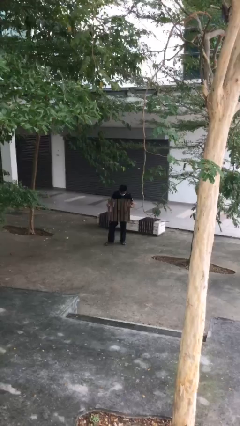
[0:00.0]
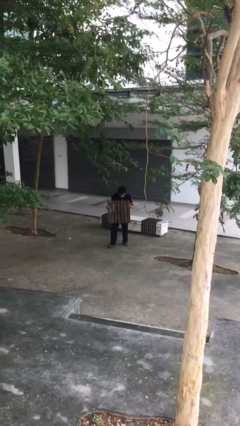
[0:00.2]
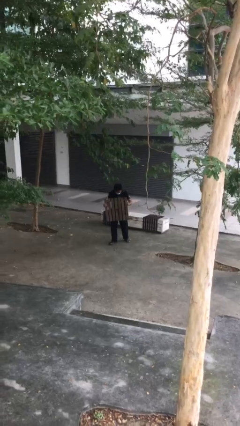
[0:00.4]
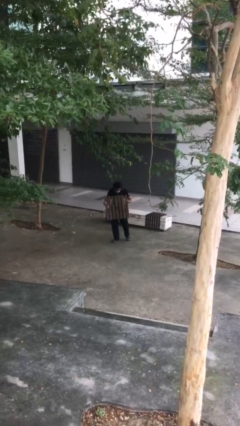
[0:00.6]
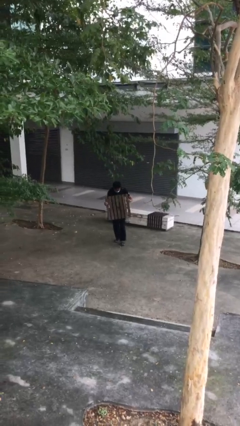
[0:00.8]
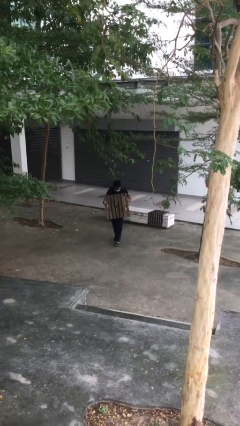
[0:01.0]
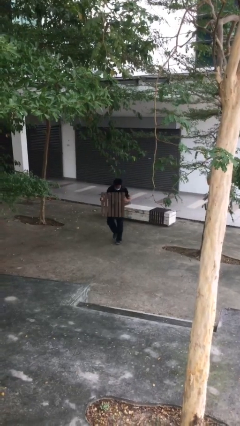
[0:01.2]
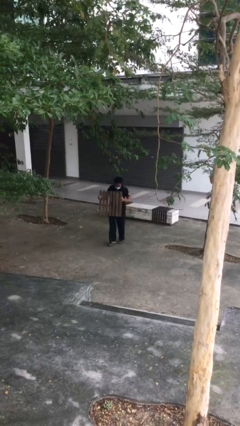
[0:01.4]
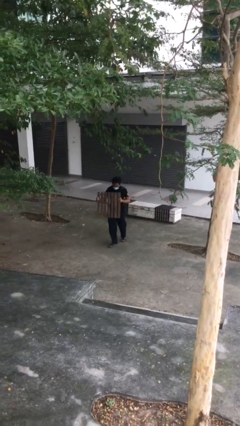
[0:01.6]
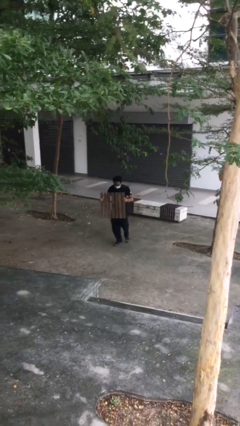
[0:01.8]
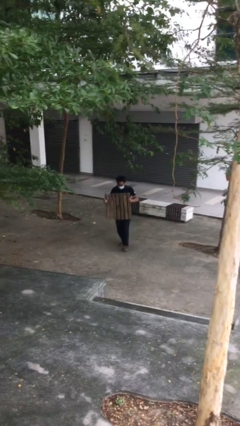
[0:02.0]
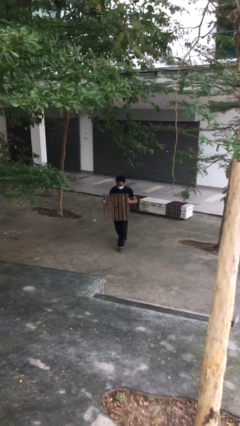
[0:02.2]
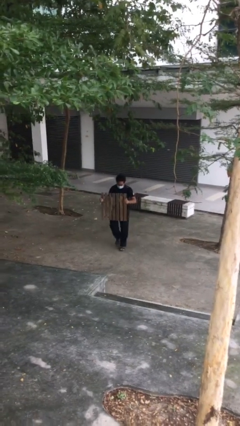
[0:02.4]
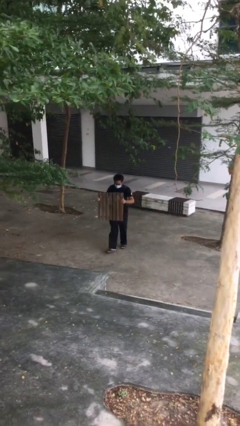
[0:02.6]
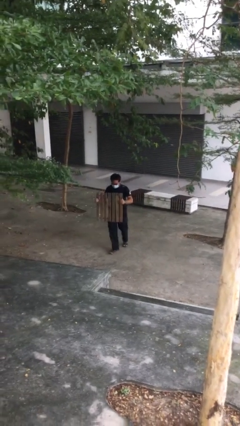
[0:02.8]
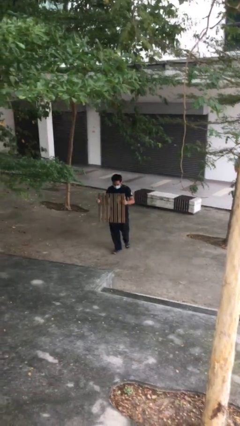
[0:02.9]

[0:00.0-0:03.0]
person carries heavy object

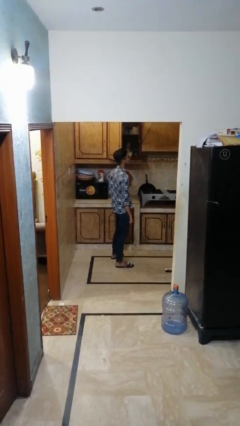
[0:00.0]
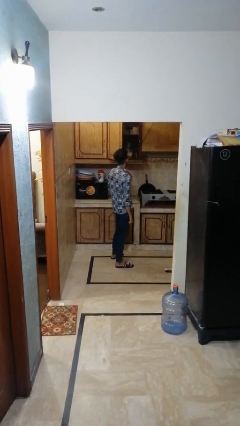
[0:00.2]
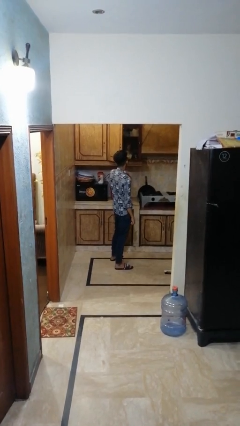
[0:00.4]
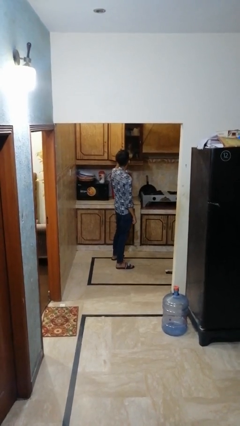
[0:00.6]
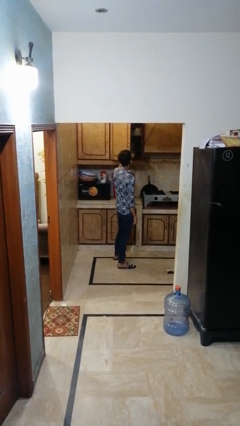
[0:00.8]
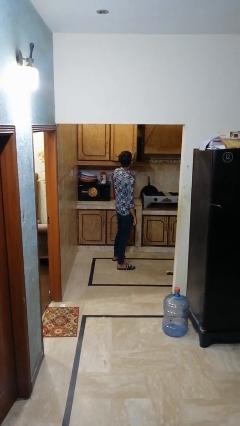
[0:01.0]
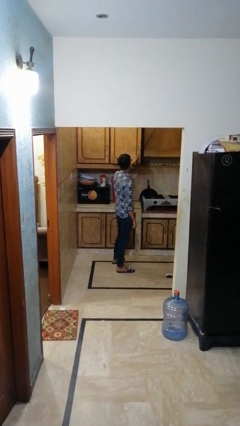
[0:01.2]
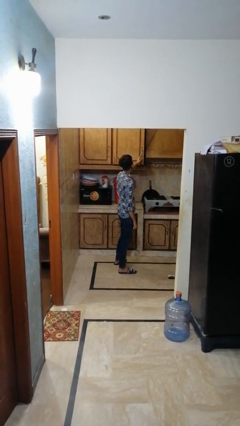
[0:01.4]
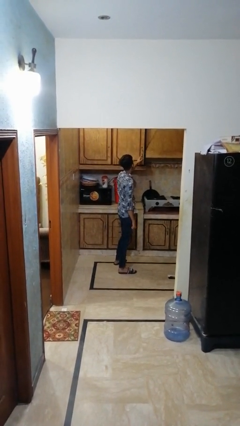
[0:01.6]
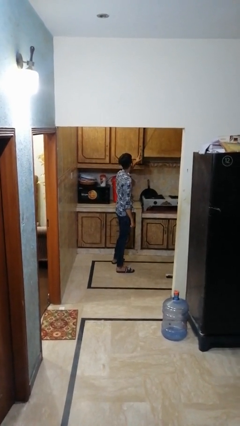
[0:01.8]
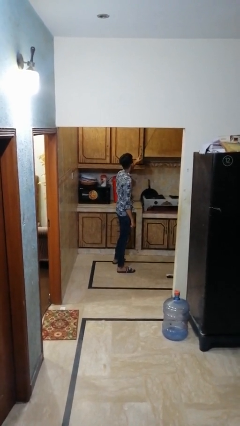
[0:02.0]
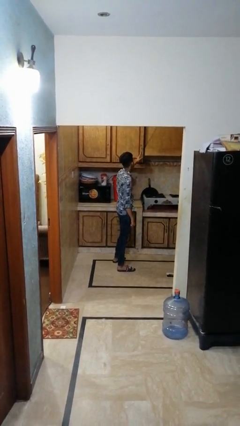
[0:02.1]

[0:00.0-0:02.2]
person closes cabinet

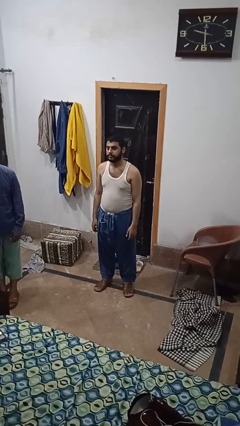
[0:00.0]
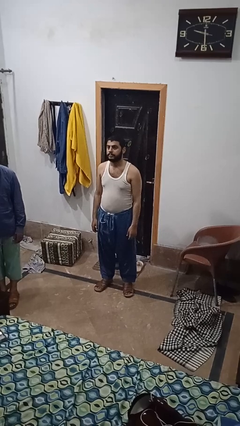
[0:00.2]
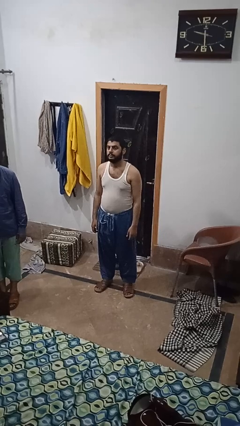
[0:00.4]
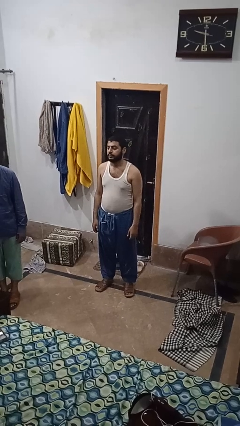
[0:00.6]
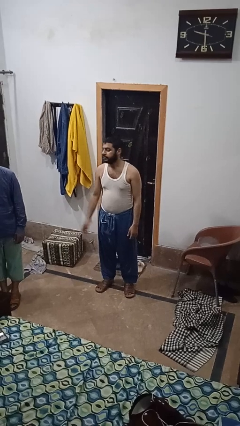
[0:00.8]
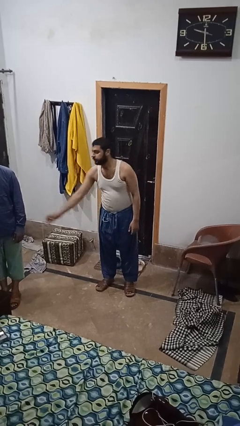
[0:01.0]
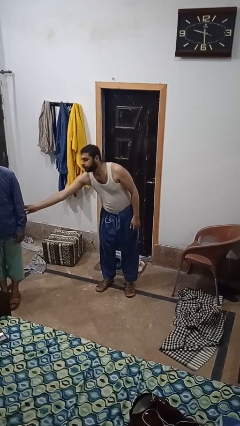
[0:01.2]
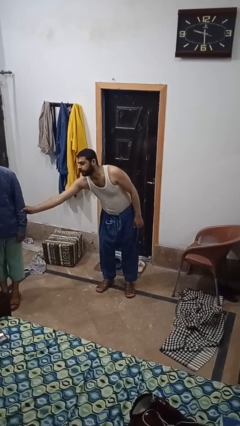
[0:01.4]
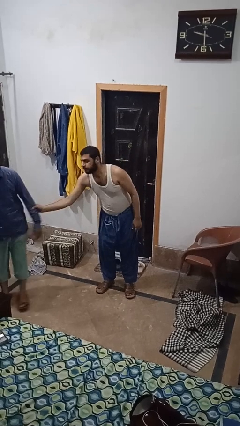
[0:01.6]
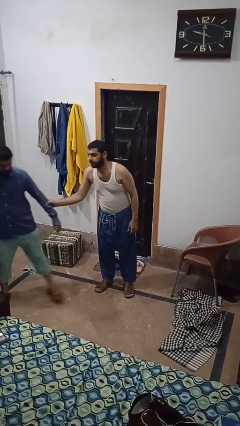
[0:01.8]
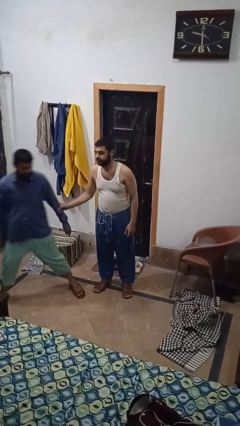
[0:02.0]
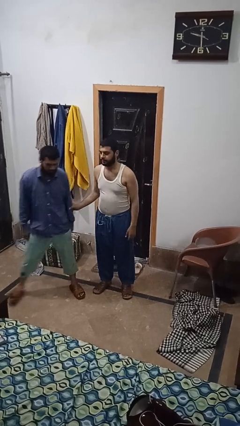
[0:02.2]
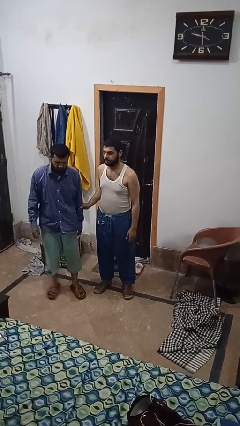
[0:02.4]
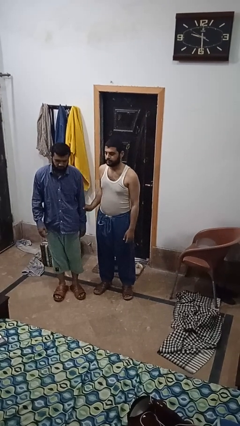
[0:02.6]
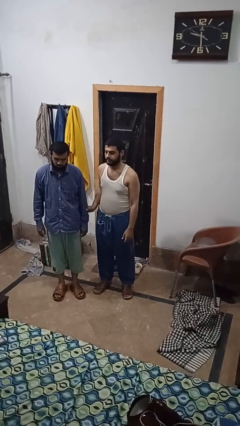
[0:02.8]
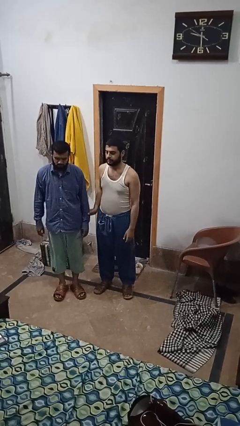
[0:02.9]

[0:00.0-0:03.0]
person grabs person by forearm

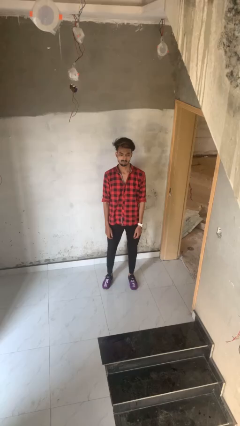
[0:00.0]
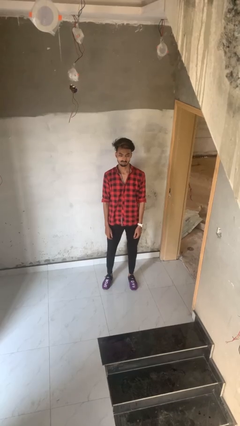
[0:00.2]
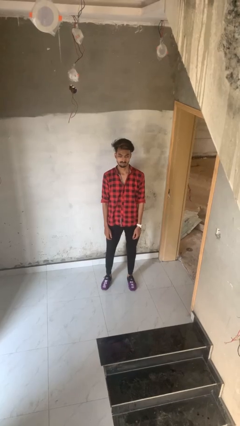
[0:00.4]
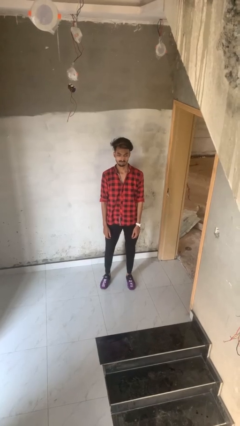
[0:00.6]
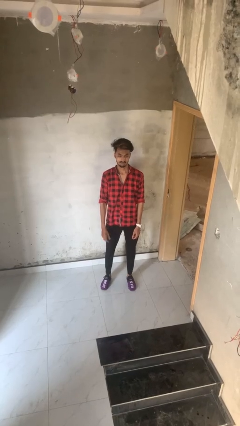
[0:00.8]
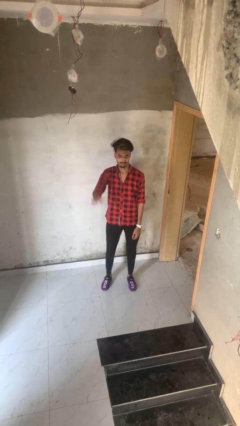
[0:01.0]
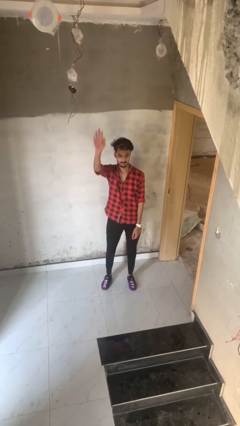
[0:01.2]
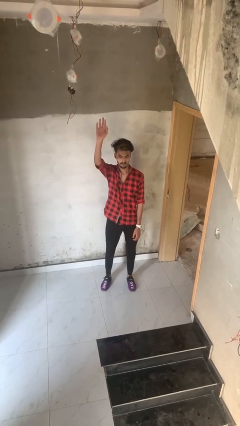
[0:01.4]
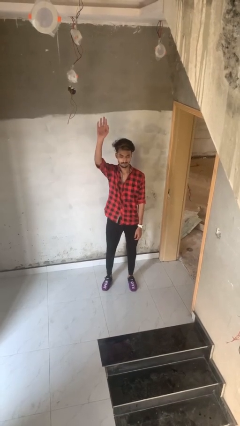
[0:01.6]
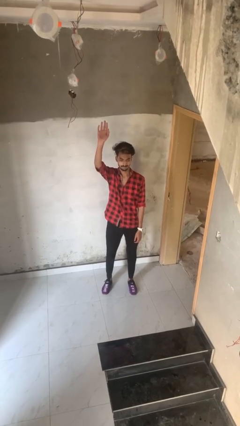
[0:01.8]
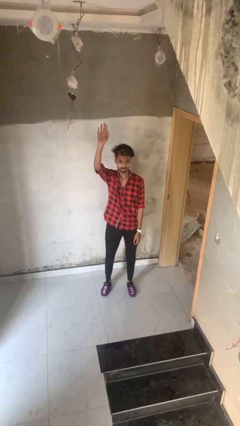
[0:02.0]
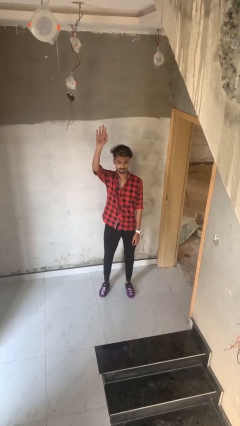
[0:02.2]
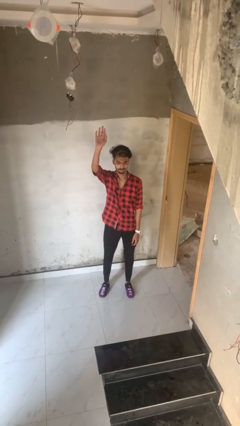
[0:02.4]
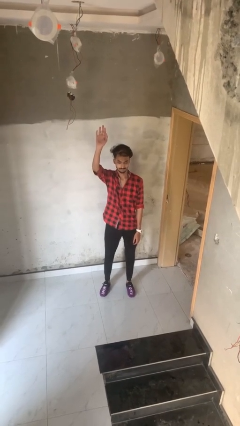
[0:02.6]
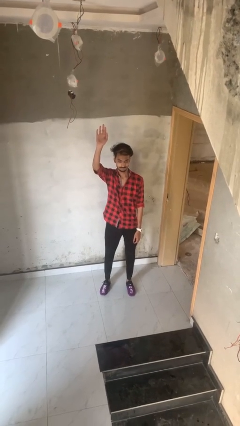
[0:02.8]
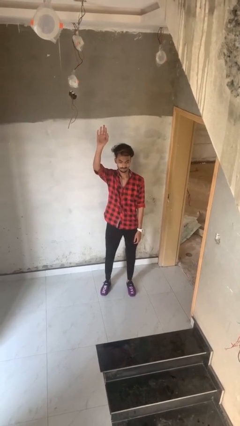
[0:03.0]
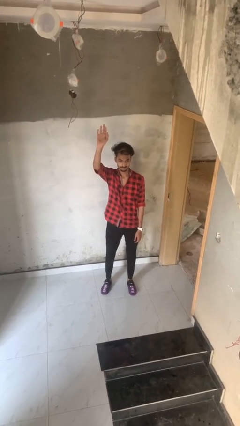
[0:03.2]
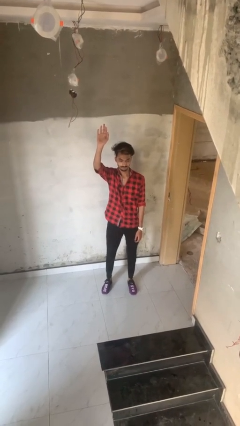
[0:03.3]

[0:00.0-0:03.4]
person gestures raise hand

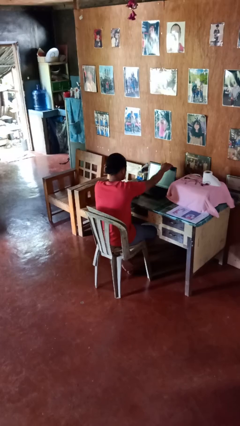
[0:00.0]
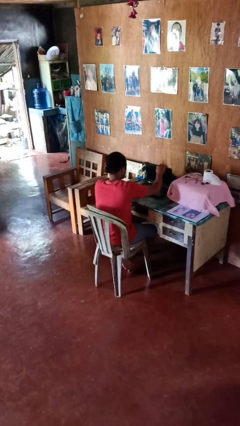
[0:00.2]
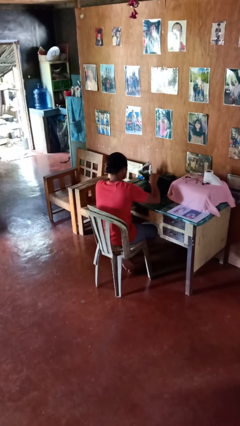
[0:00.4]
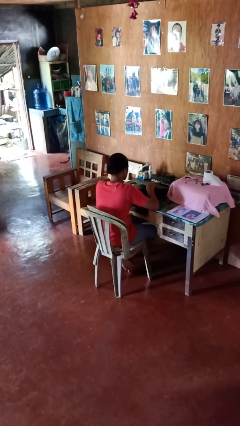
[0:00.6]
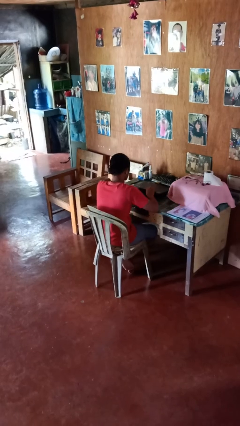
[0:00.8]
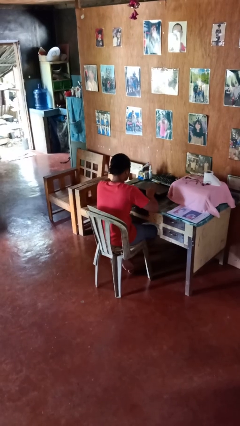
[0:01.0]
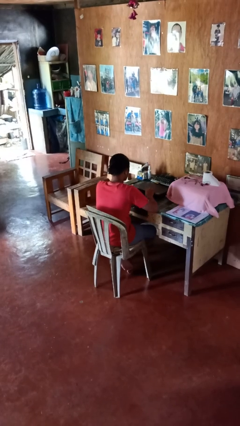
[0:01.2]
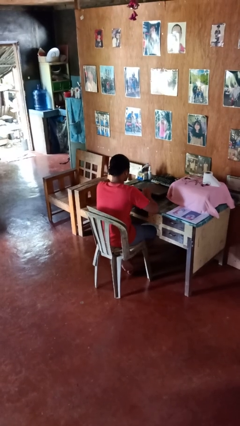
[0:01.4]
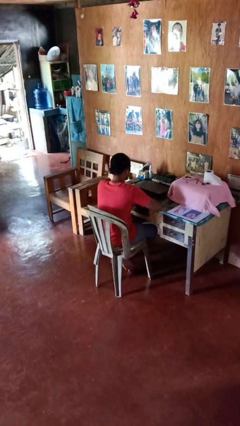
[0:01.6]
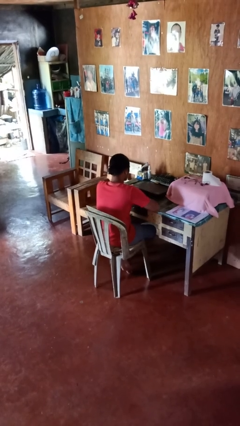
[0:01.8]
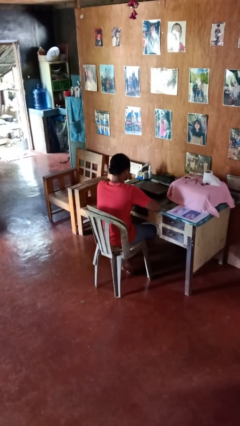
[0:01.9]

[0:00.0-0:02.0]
person closes laptop

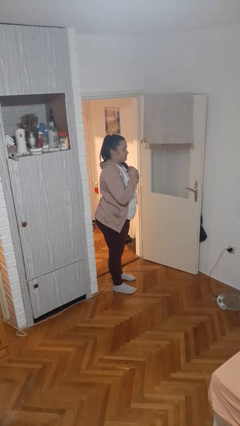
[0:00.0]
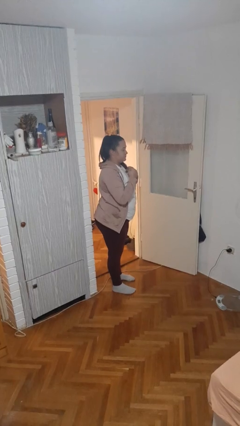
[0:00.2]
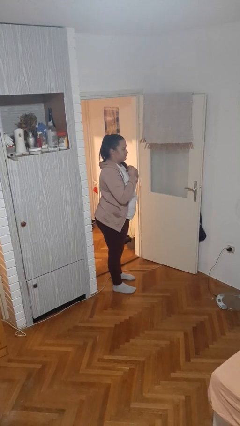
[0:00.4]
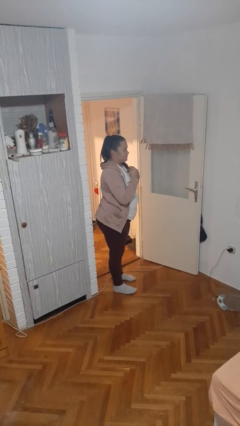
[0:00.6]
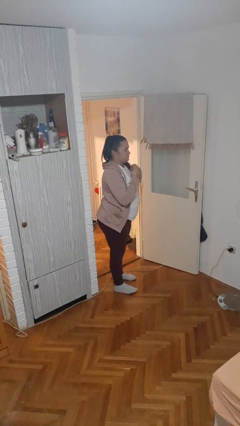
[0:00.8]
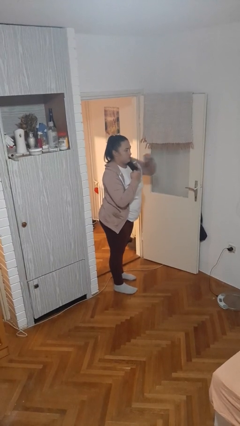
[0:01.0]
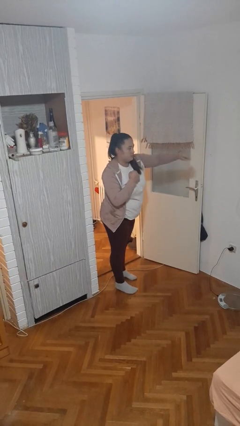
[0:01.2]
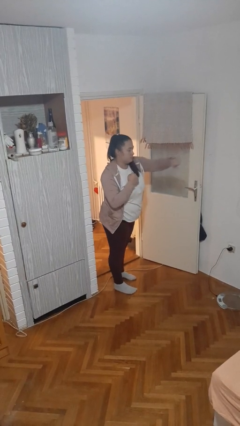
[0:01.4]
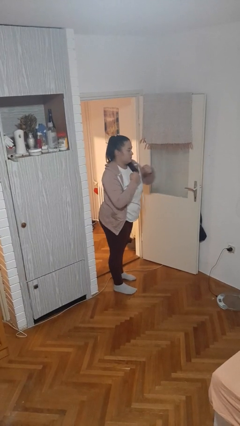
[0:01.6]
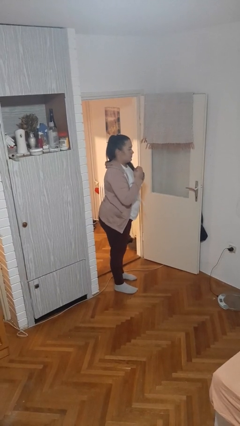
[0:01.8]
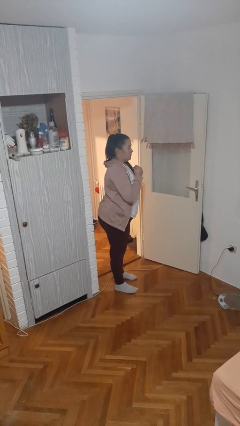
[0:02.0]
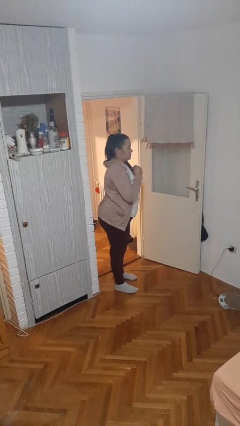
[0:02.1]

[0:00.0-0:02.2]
person punches

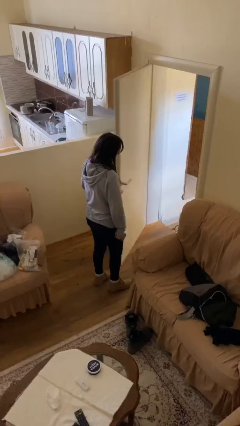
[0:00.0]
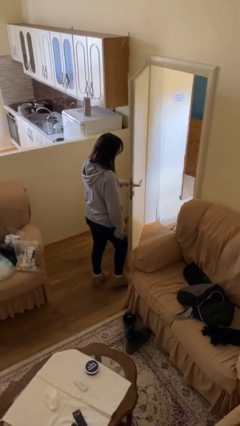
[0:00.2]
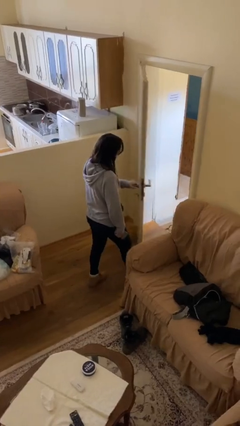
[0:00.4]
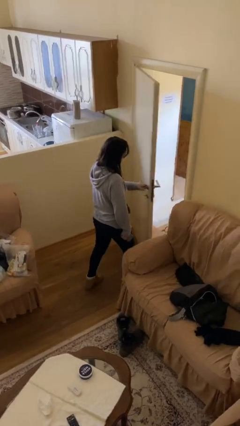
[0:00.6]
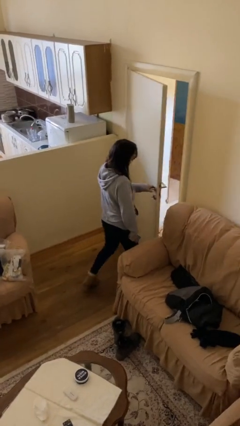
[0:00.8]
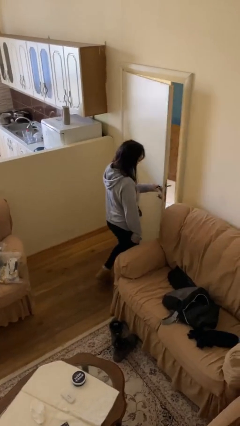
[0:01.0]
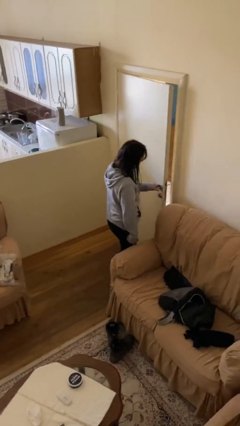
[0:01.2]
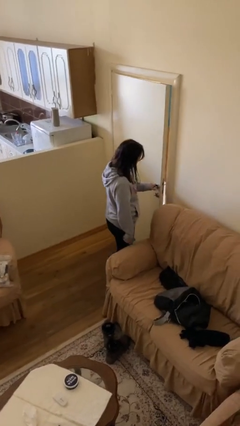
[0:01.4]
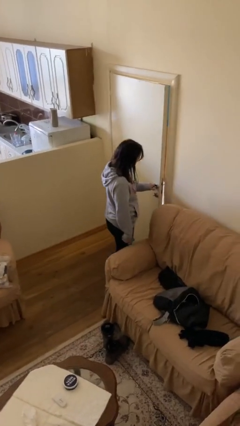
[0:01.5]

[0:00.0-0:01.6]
person closes facility door
